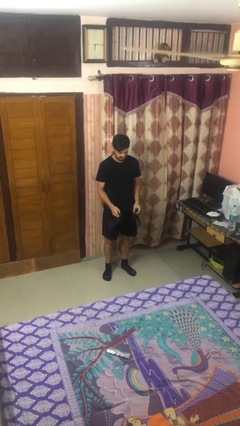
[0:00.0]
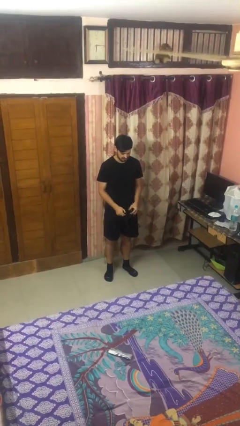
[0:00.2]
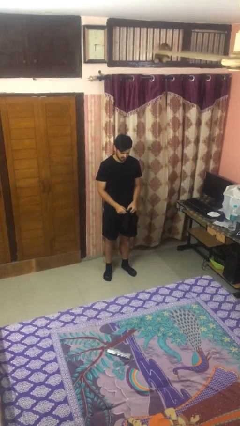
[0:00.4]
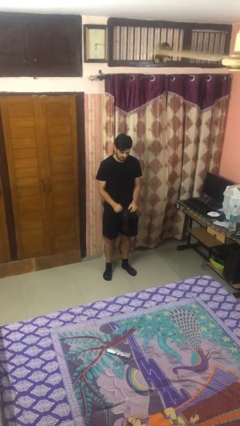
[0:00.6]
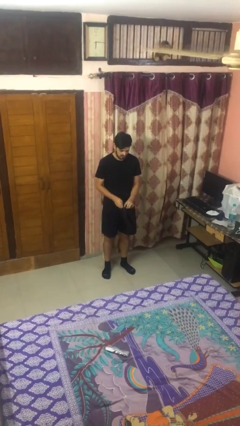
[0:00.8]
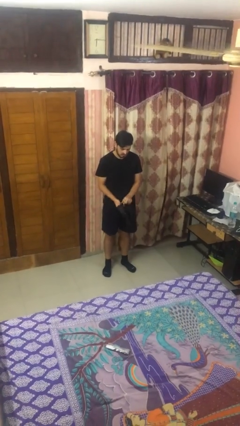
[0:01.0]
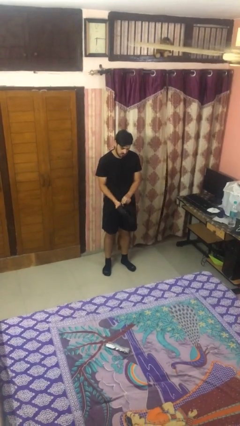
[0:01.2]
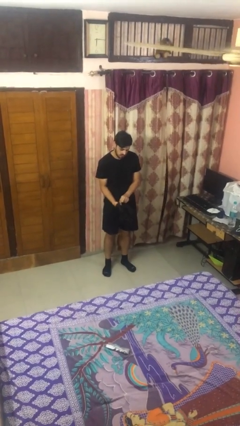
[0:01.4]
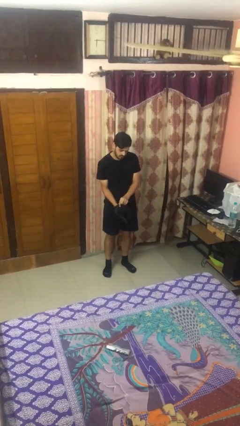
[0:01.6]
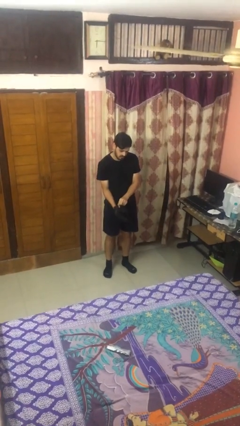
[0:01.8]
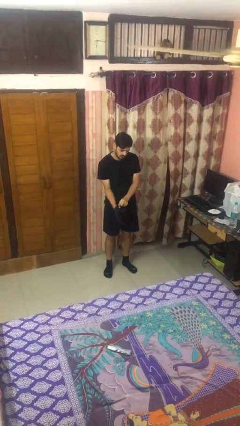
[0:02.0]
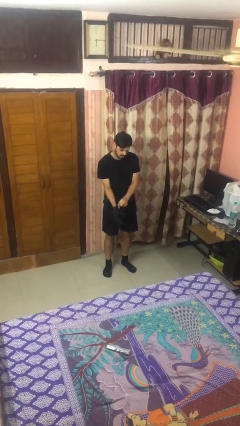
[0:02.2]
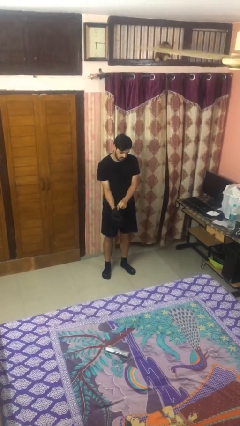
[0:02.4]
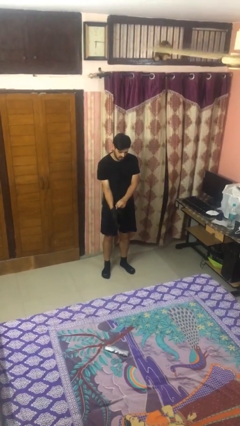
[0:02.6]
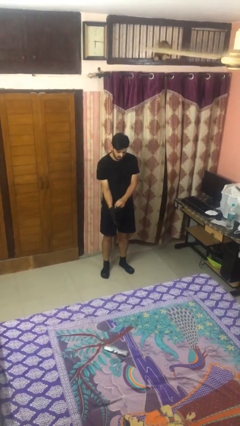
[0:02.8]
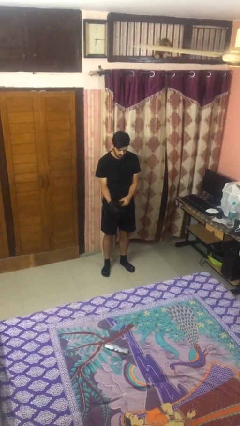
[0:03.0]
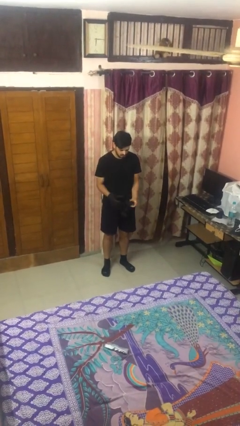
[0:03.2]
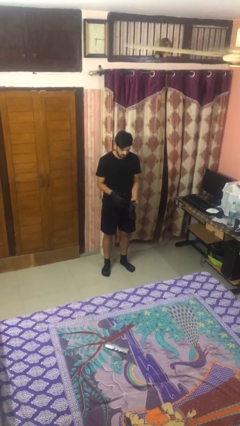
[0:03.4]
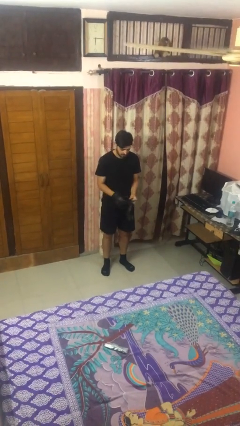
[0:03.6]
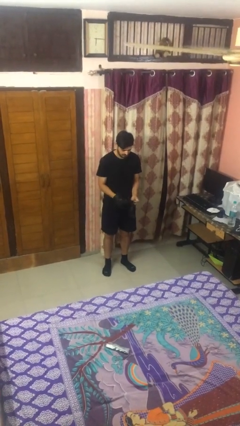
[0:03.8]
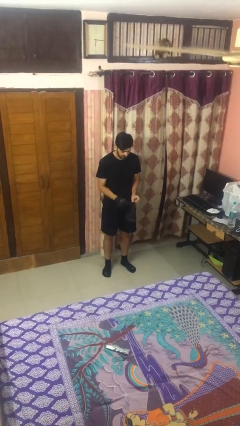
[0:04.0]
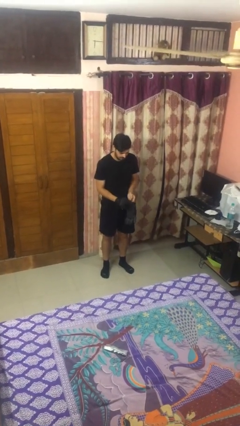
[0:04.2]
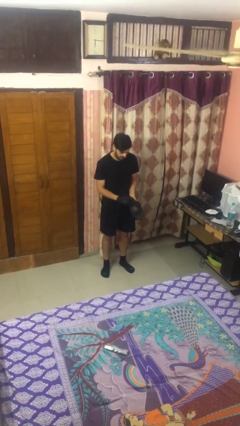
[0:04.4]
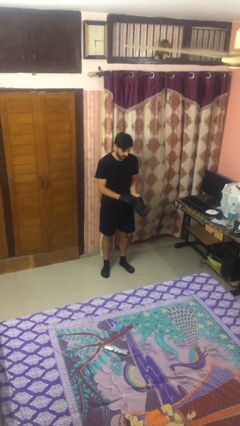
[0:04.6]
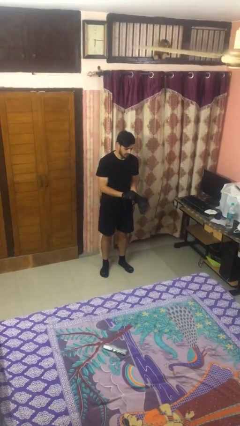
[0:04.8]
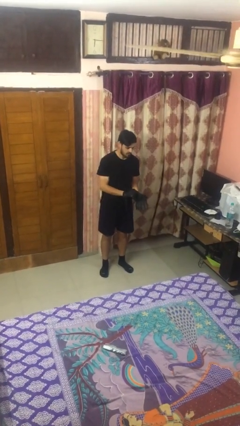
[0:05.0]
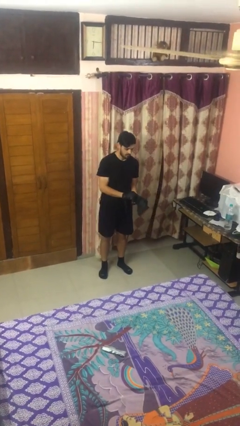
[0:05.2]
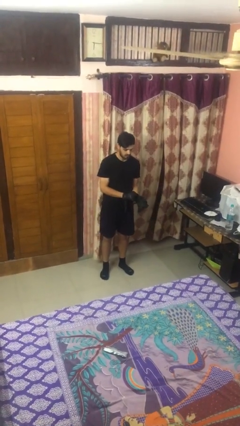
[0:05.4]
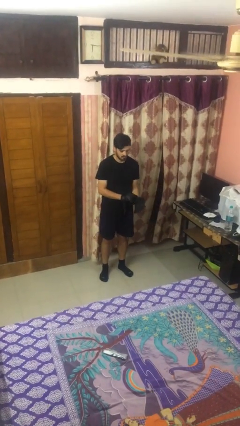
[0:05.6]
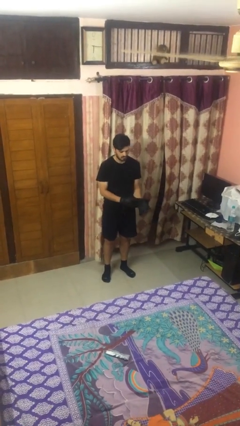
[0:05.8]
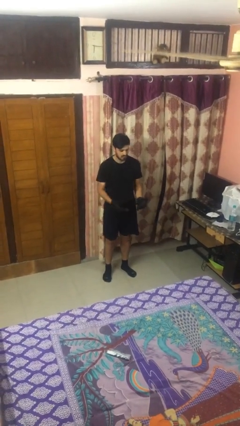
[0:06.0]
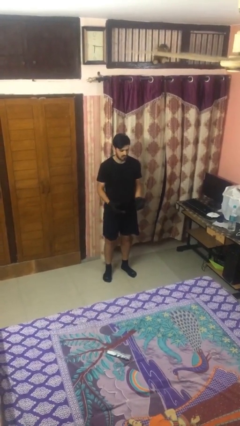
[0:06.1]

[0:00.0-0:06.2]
person puts on gloves

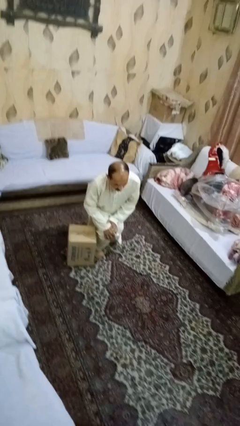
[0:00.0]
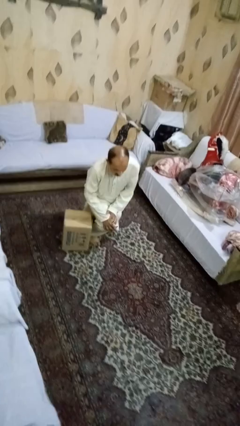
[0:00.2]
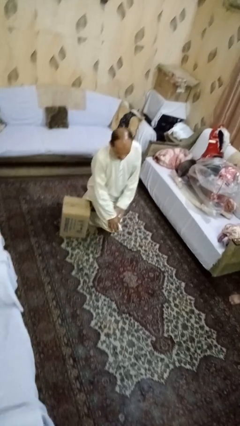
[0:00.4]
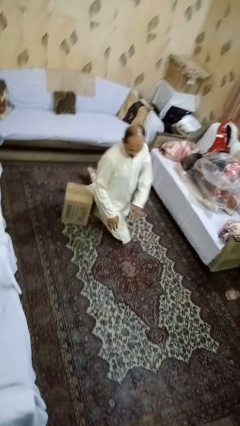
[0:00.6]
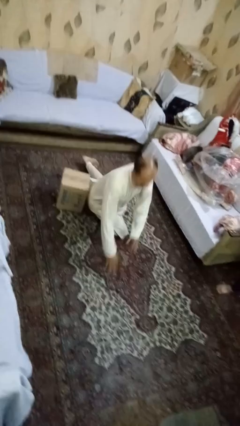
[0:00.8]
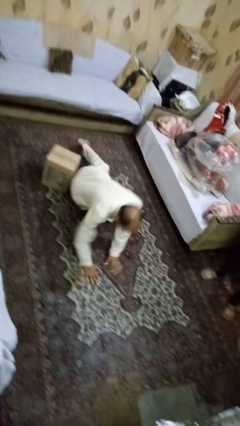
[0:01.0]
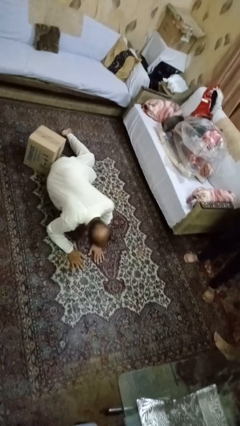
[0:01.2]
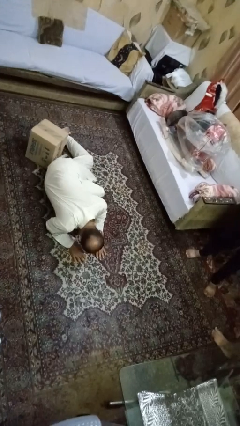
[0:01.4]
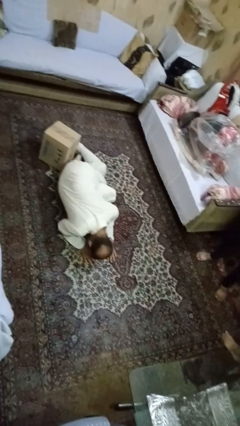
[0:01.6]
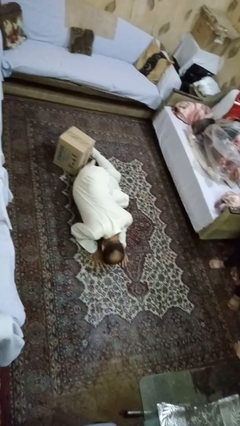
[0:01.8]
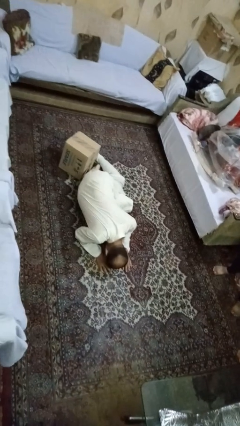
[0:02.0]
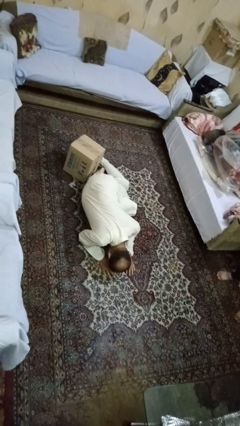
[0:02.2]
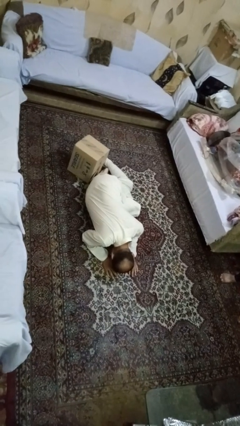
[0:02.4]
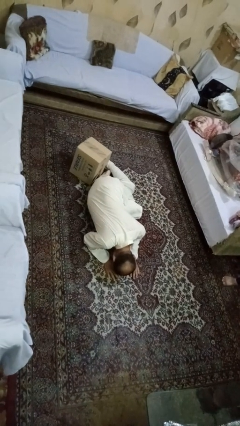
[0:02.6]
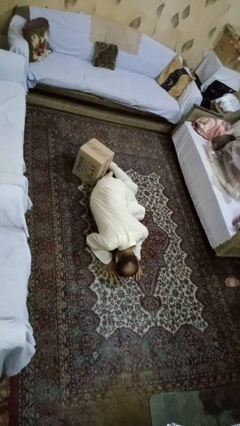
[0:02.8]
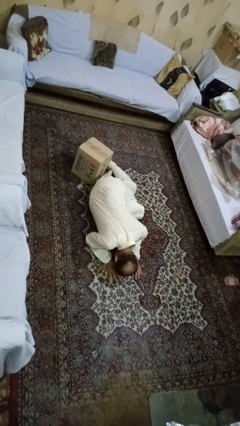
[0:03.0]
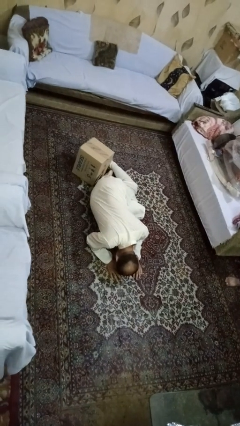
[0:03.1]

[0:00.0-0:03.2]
person lies down on floor

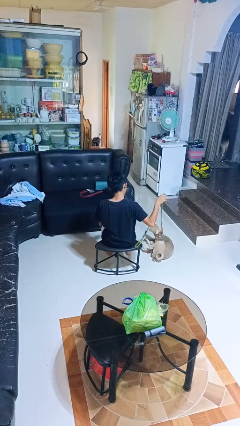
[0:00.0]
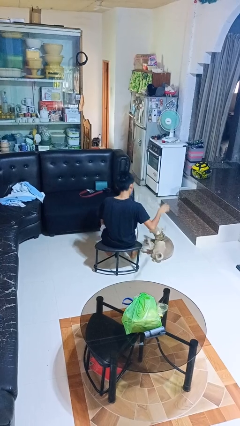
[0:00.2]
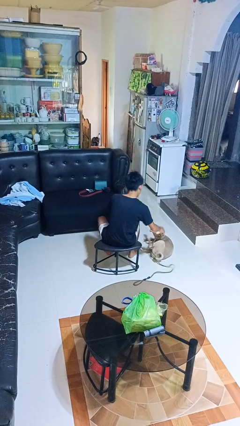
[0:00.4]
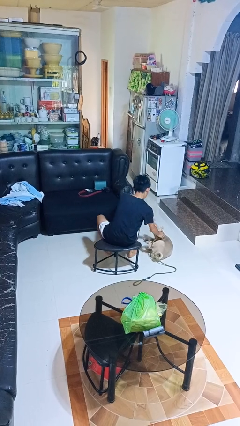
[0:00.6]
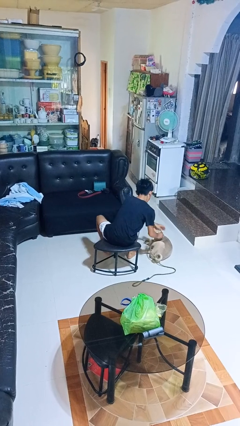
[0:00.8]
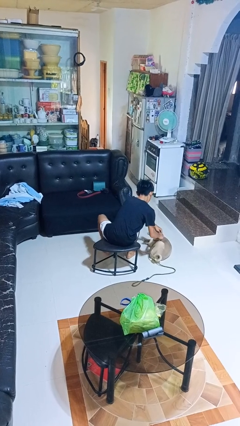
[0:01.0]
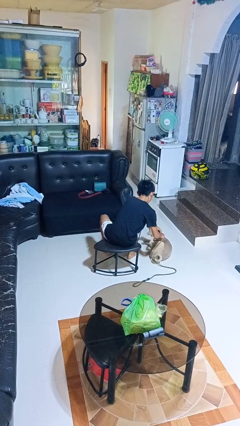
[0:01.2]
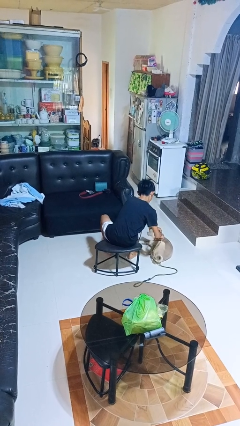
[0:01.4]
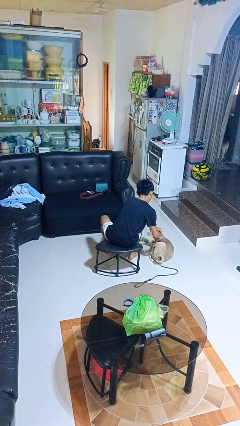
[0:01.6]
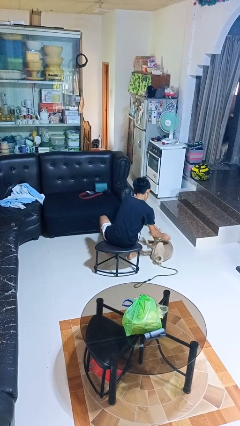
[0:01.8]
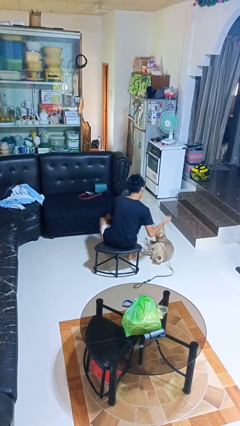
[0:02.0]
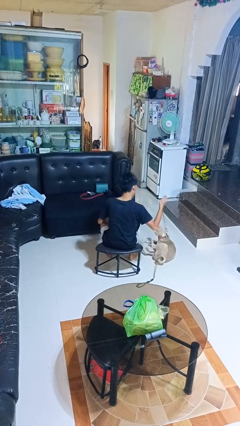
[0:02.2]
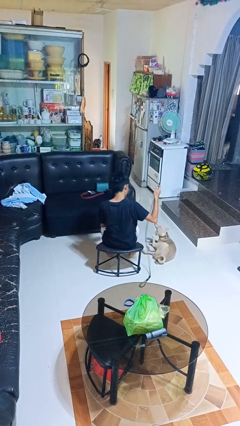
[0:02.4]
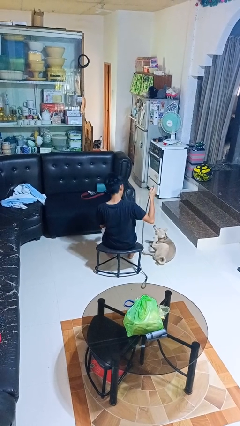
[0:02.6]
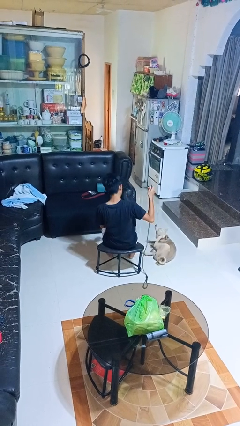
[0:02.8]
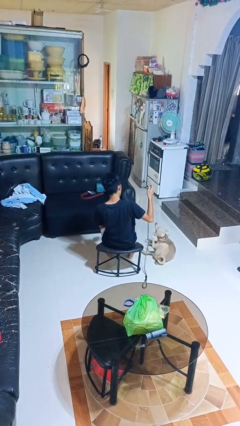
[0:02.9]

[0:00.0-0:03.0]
person unattaches leash from dog

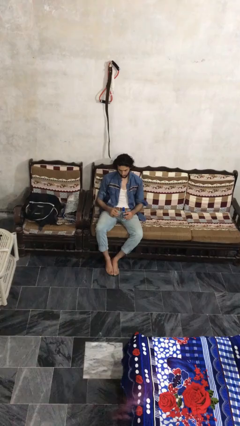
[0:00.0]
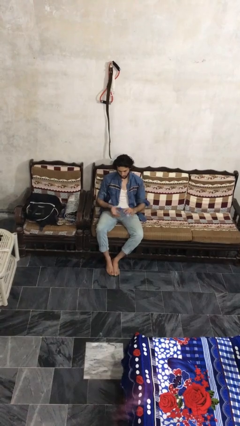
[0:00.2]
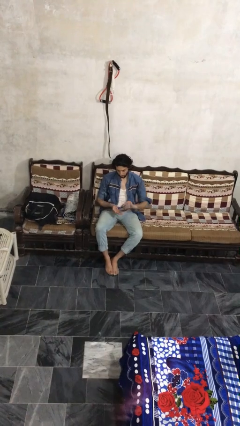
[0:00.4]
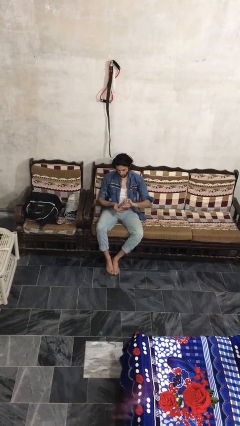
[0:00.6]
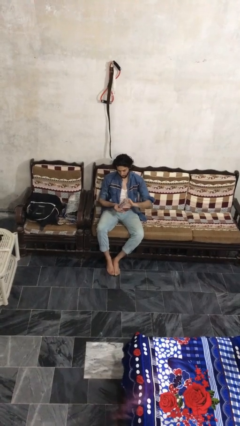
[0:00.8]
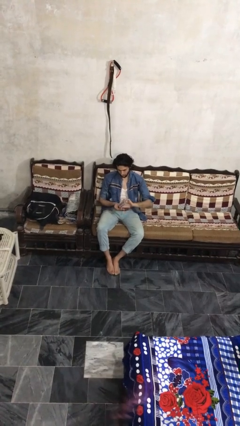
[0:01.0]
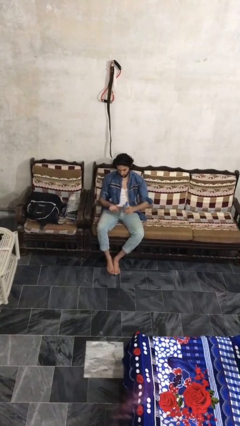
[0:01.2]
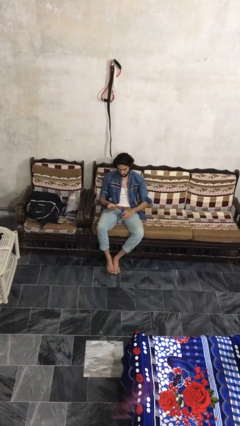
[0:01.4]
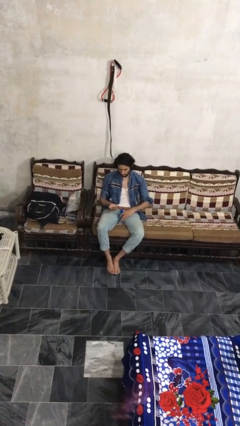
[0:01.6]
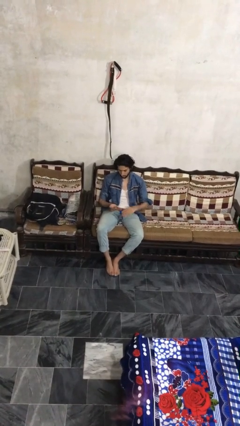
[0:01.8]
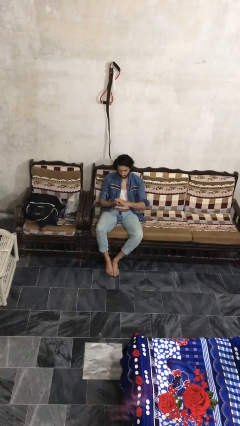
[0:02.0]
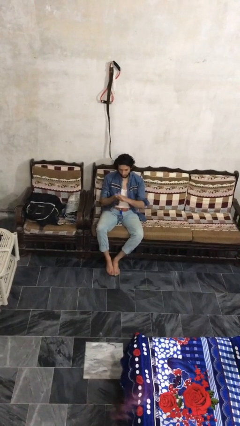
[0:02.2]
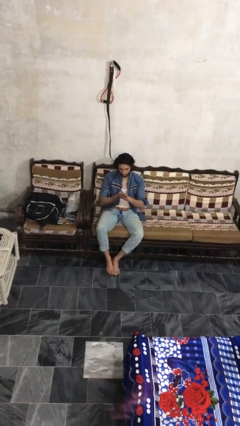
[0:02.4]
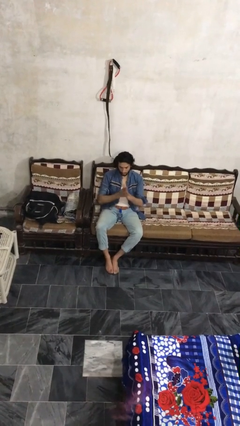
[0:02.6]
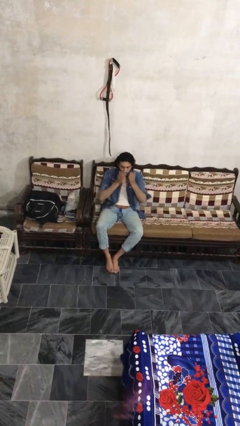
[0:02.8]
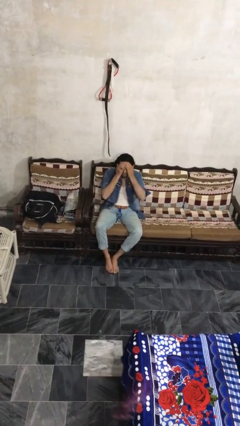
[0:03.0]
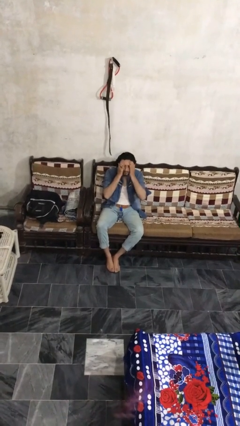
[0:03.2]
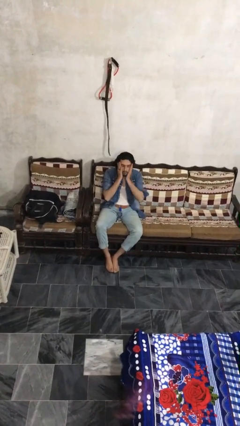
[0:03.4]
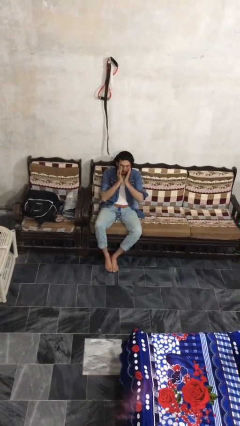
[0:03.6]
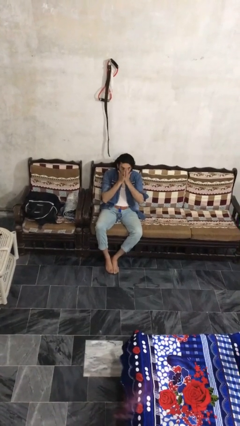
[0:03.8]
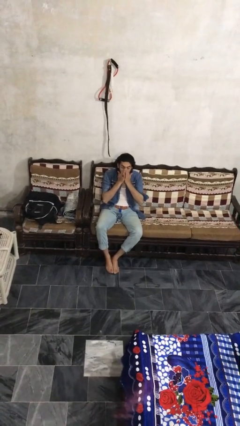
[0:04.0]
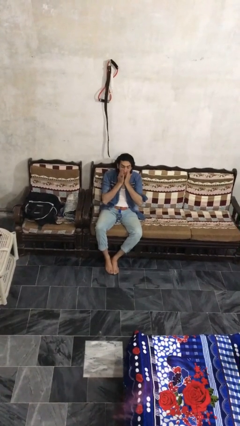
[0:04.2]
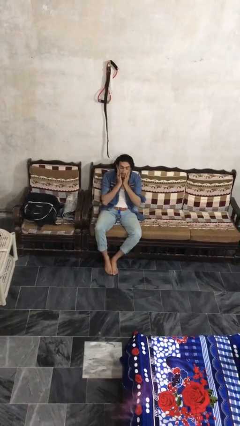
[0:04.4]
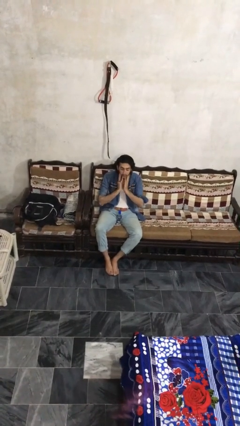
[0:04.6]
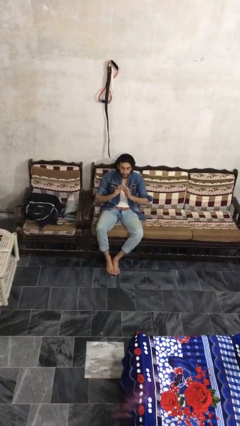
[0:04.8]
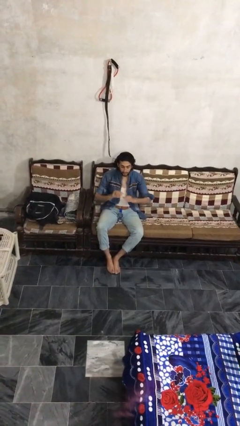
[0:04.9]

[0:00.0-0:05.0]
person applies facial moisturizer

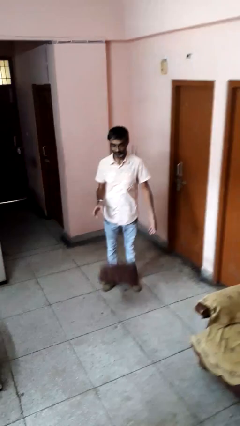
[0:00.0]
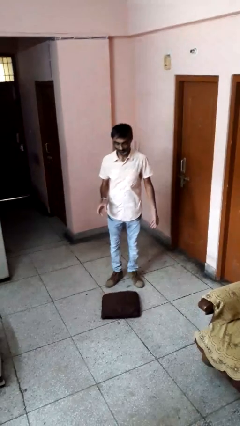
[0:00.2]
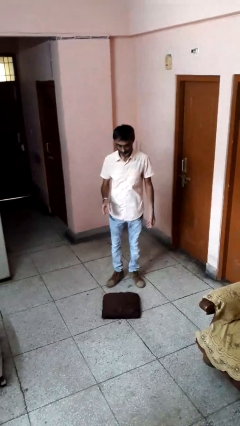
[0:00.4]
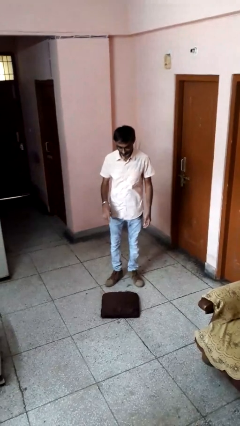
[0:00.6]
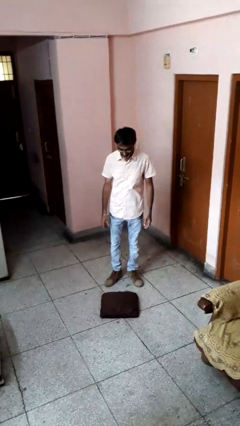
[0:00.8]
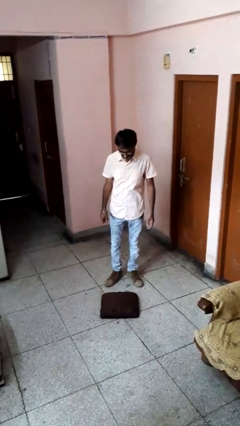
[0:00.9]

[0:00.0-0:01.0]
person drops object
